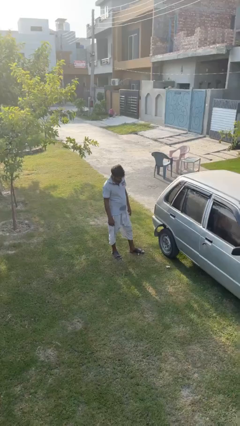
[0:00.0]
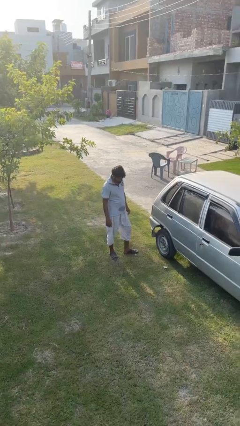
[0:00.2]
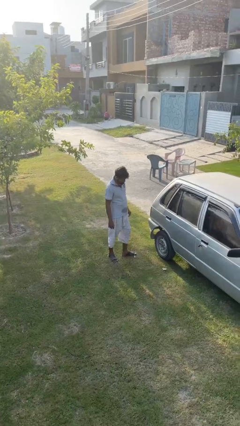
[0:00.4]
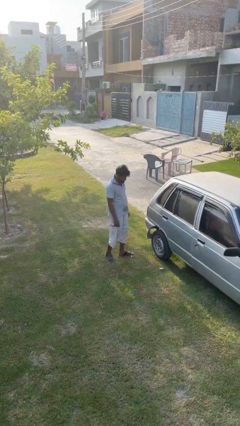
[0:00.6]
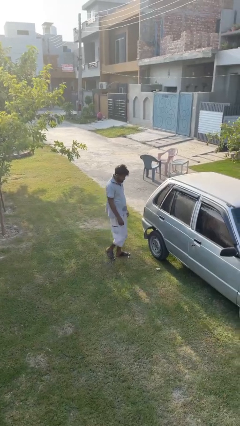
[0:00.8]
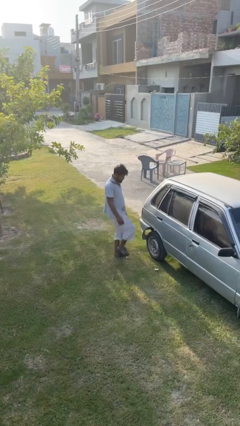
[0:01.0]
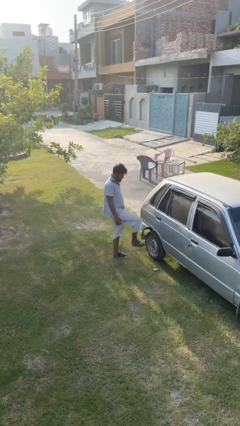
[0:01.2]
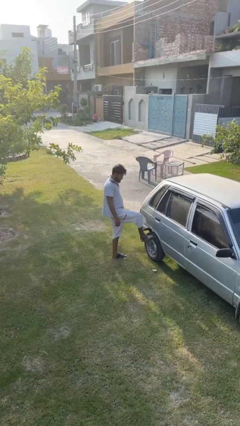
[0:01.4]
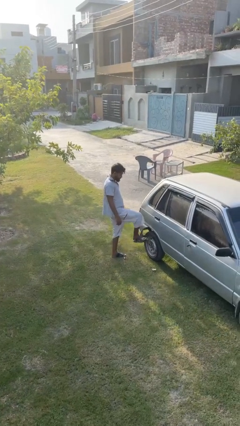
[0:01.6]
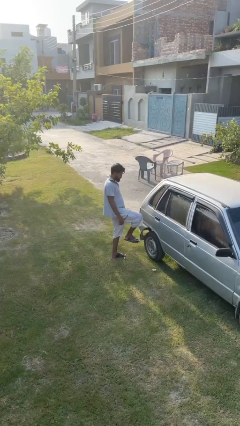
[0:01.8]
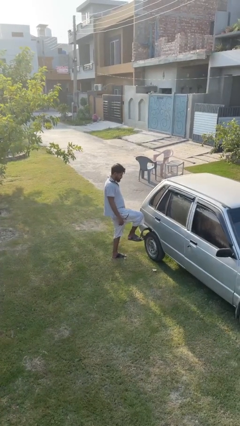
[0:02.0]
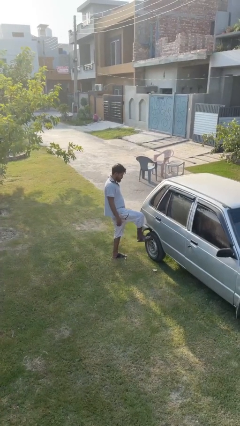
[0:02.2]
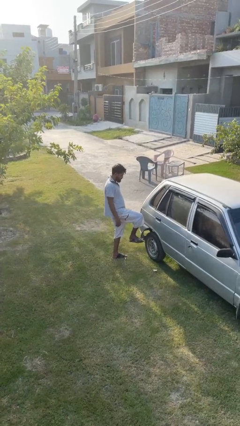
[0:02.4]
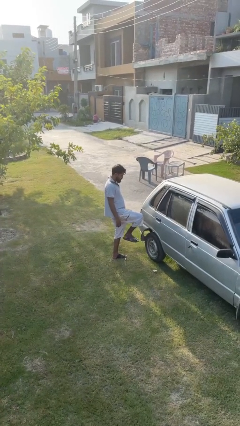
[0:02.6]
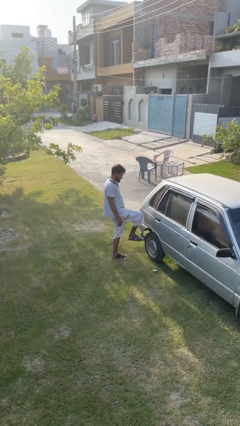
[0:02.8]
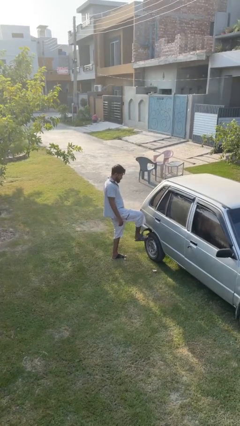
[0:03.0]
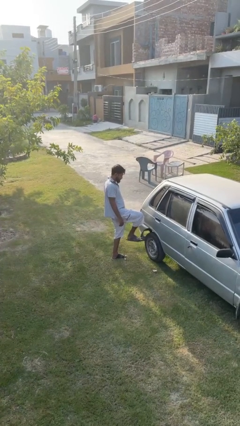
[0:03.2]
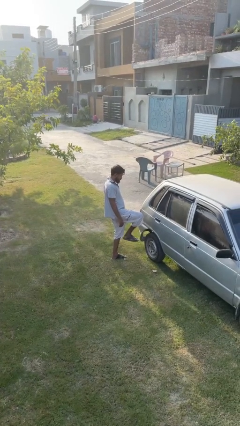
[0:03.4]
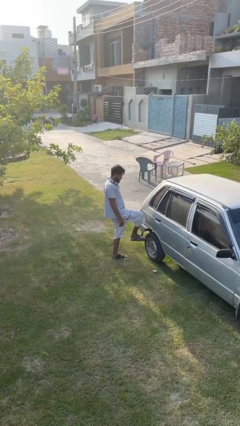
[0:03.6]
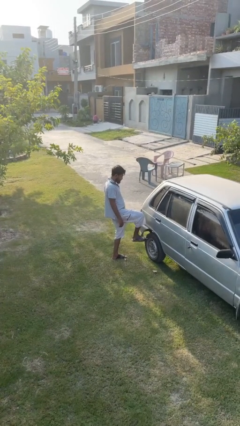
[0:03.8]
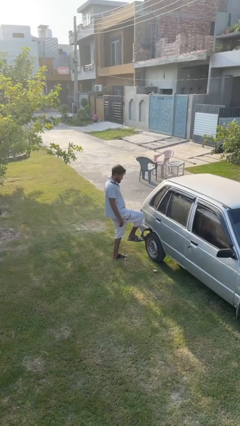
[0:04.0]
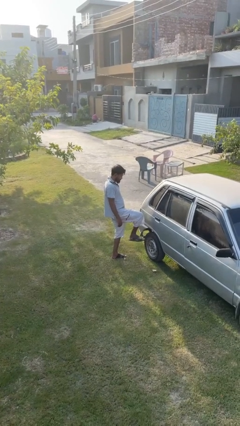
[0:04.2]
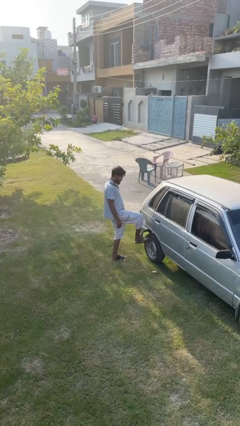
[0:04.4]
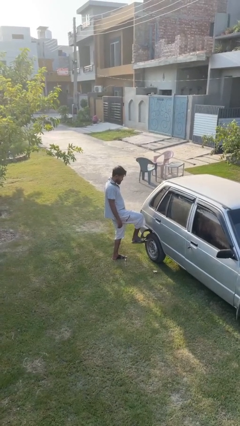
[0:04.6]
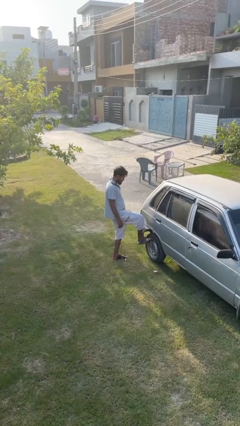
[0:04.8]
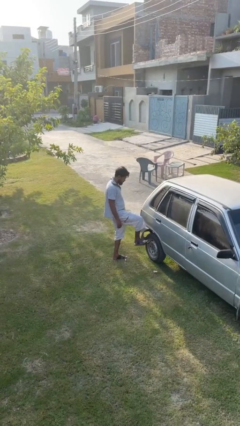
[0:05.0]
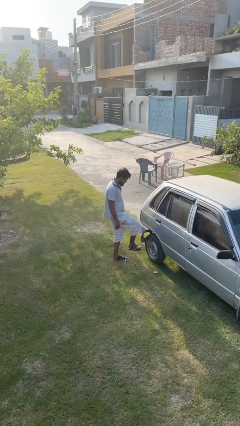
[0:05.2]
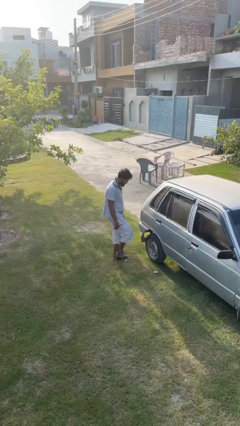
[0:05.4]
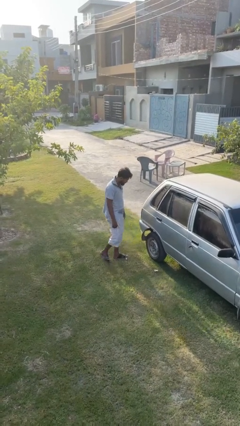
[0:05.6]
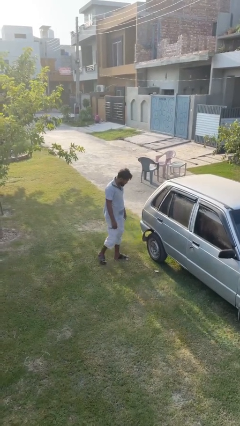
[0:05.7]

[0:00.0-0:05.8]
person kicks car tires

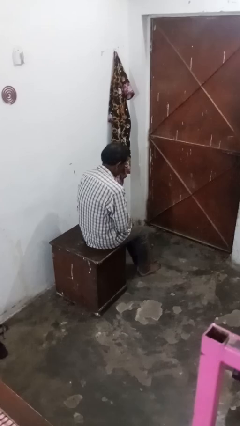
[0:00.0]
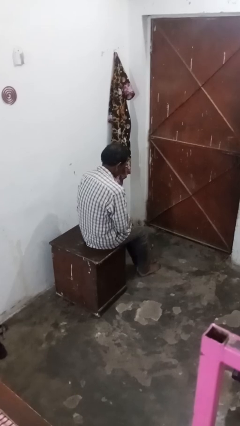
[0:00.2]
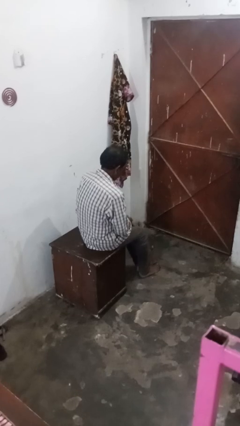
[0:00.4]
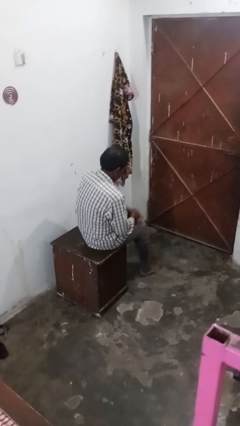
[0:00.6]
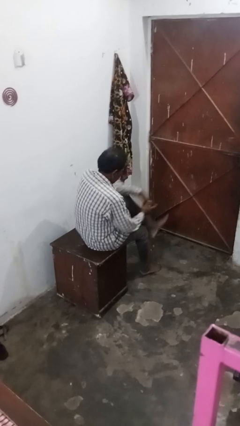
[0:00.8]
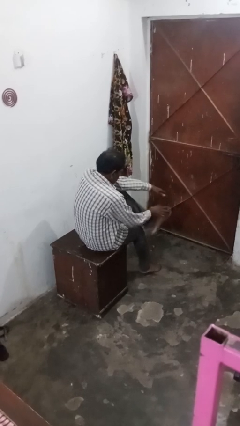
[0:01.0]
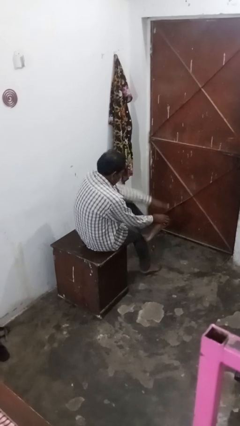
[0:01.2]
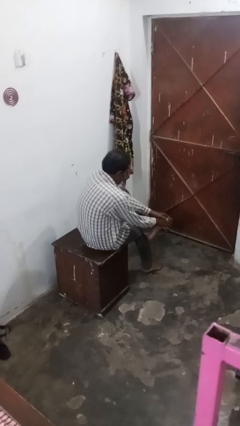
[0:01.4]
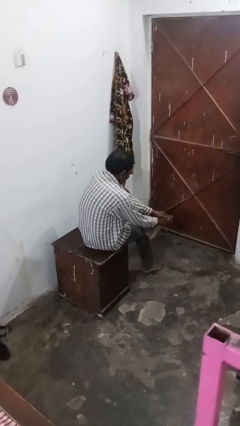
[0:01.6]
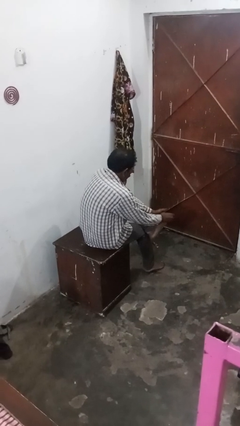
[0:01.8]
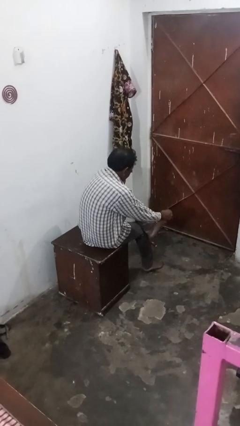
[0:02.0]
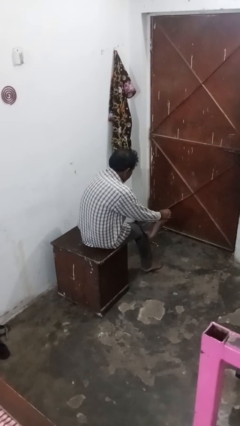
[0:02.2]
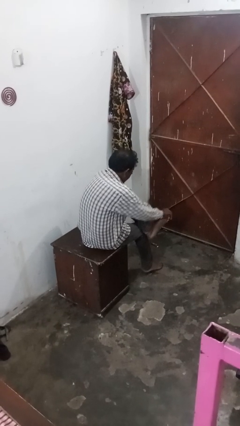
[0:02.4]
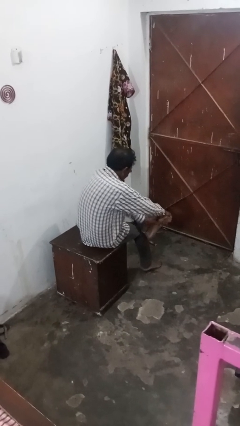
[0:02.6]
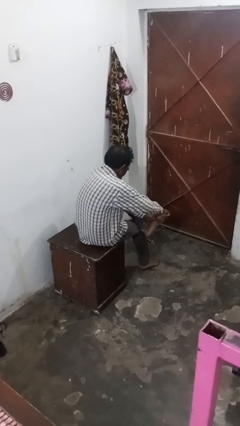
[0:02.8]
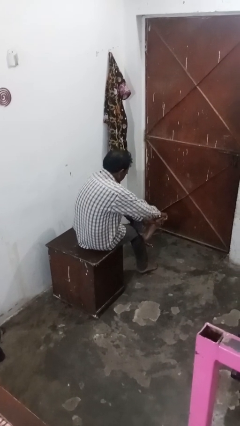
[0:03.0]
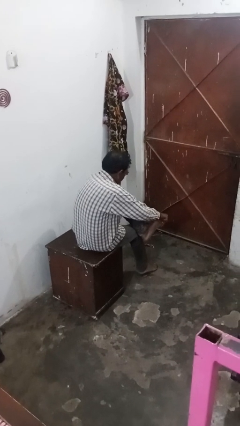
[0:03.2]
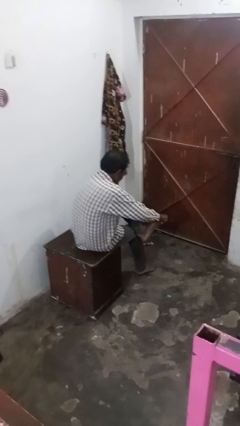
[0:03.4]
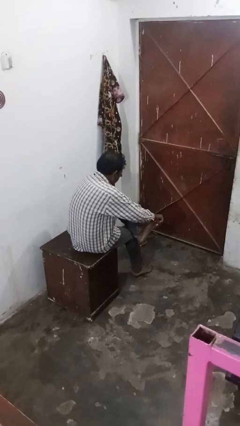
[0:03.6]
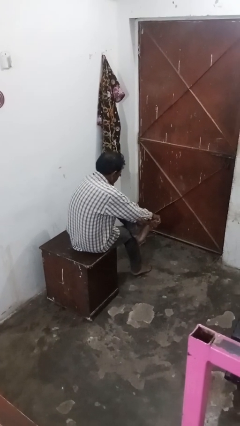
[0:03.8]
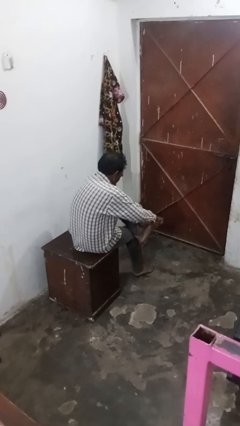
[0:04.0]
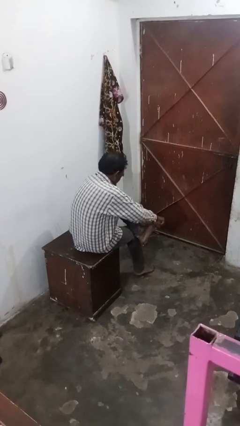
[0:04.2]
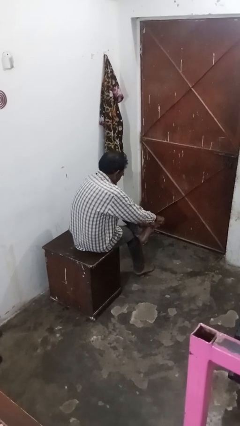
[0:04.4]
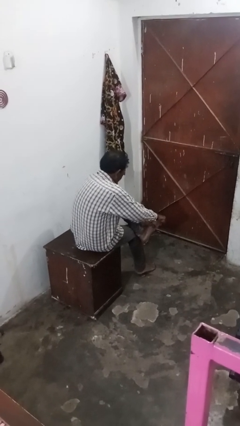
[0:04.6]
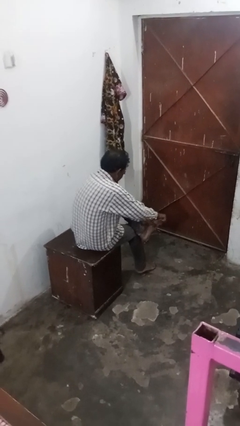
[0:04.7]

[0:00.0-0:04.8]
person rubs foot

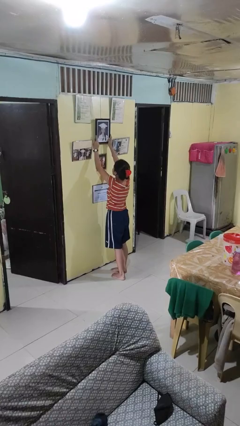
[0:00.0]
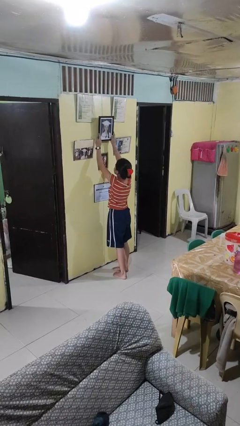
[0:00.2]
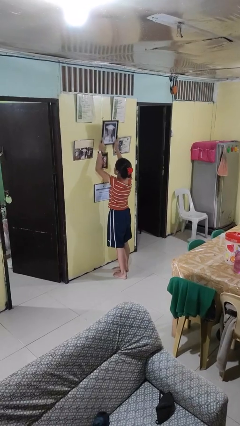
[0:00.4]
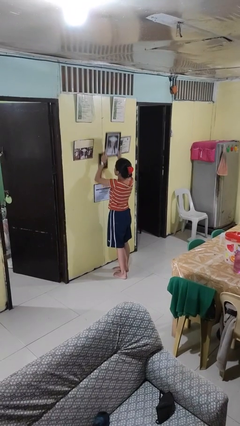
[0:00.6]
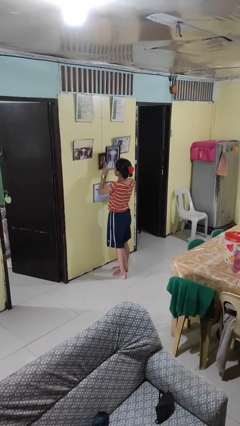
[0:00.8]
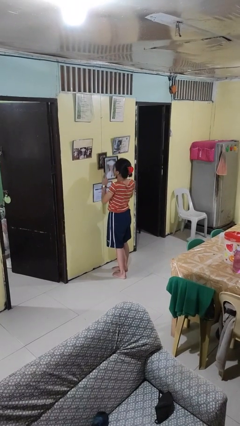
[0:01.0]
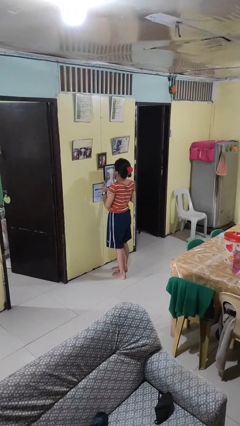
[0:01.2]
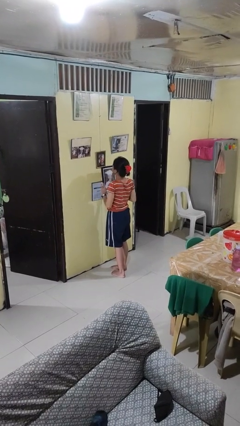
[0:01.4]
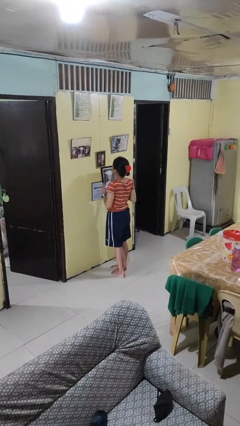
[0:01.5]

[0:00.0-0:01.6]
person takes down picture frame

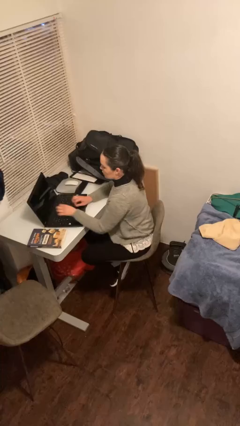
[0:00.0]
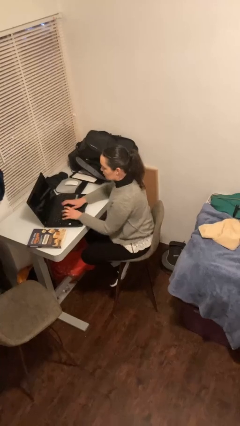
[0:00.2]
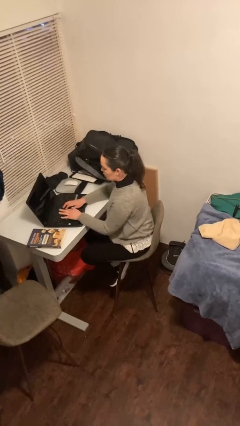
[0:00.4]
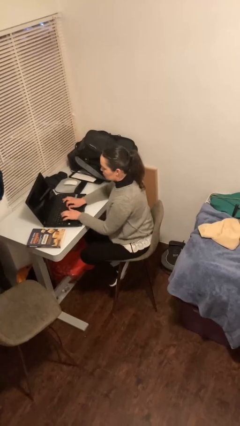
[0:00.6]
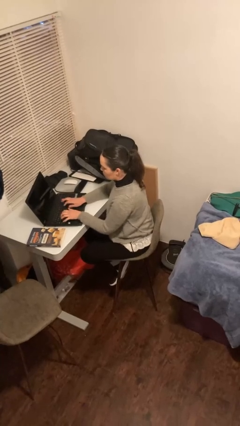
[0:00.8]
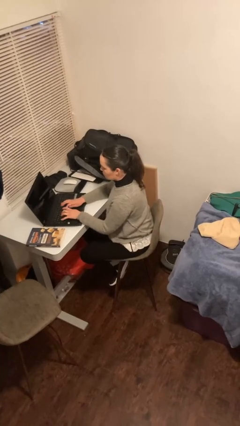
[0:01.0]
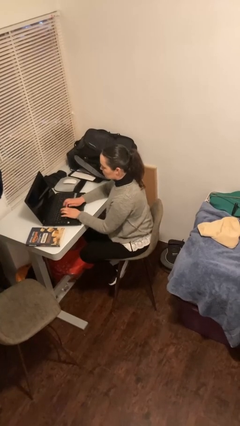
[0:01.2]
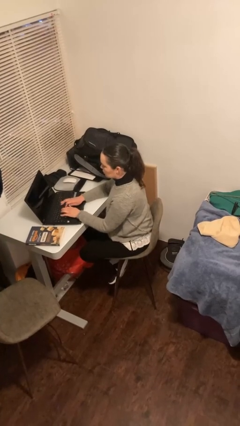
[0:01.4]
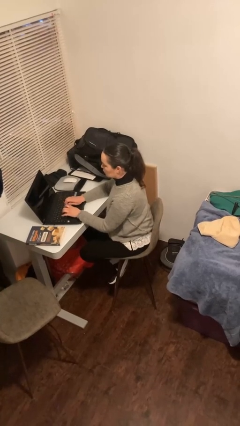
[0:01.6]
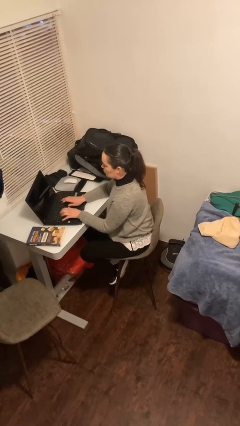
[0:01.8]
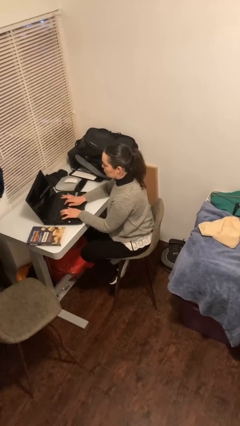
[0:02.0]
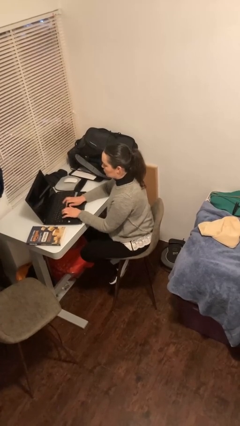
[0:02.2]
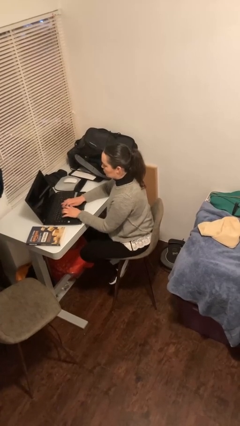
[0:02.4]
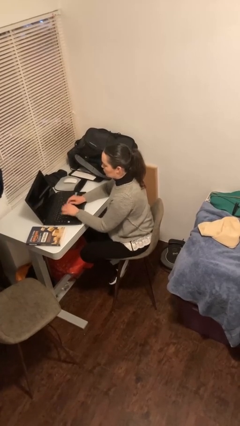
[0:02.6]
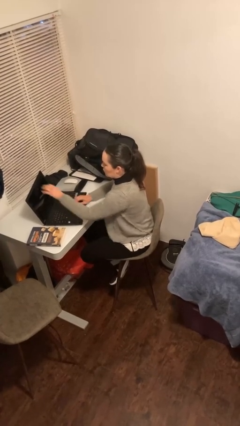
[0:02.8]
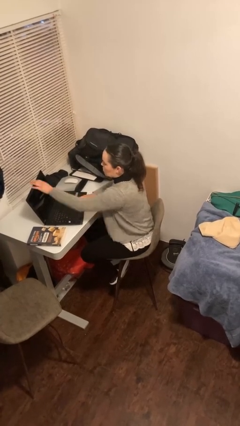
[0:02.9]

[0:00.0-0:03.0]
person interacts with laptop

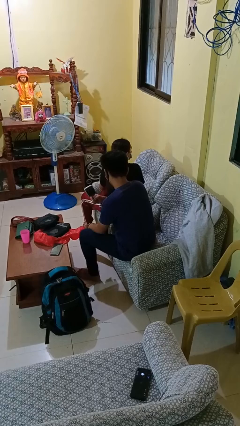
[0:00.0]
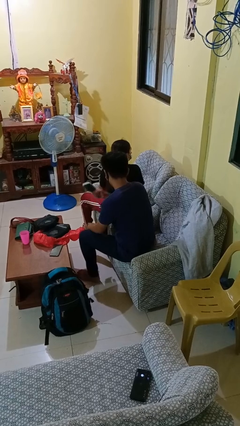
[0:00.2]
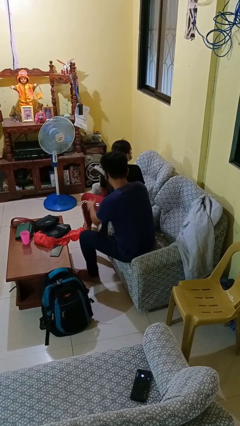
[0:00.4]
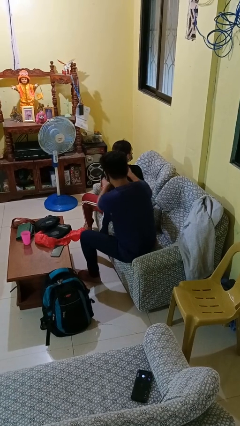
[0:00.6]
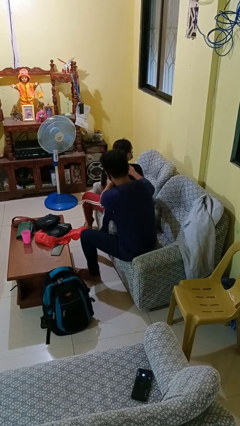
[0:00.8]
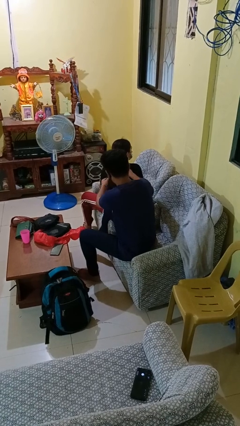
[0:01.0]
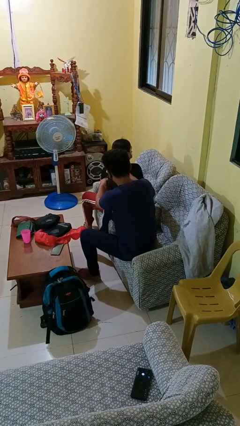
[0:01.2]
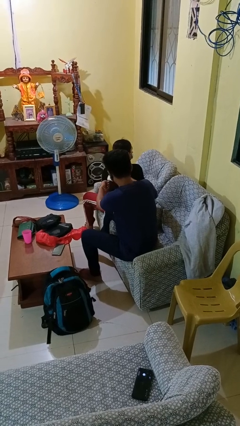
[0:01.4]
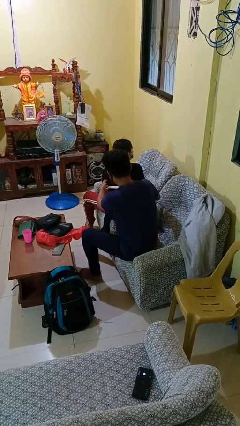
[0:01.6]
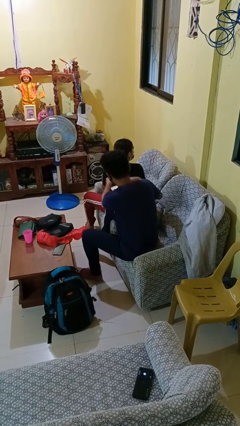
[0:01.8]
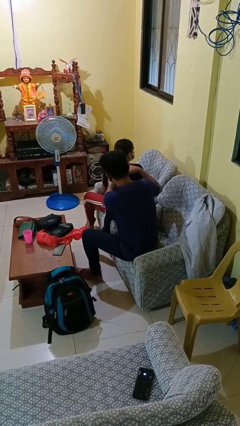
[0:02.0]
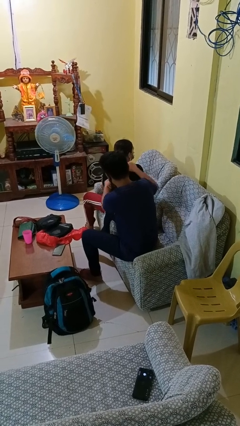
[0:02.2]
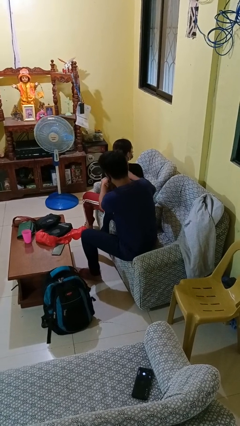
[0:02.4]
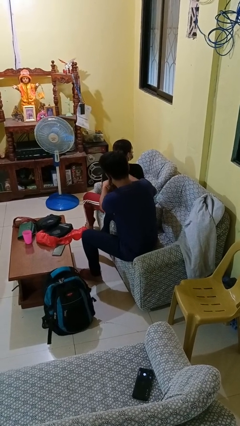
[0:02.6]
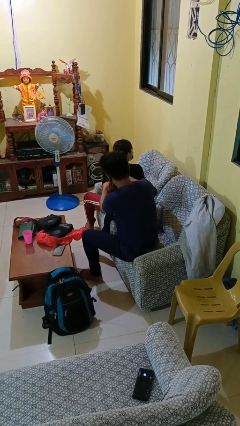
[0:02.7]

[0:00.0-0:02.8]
person brushes hair of person
